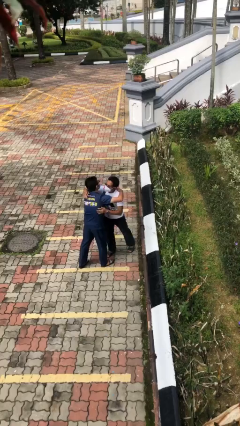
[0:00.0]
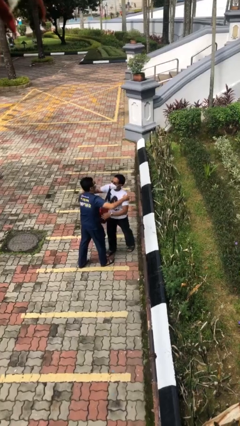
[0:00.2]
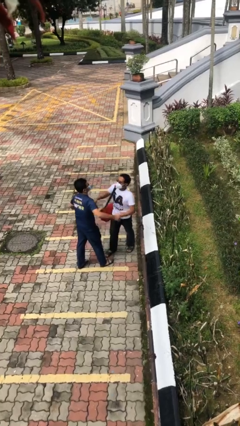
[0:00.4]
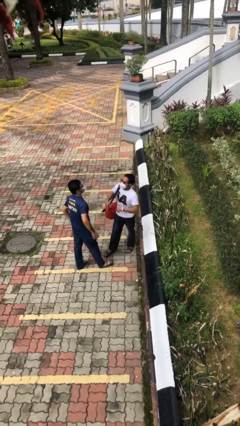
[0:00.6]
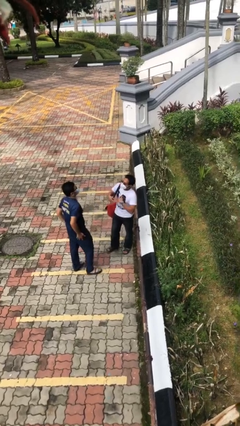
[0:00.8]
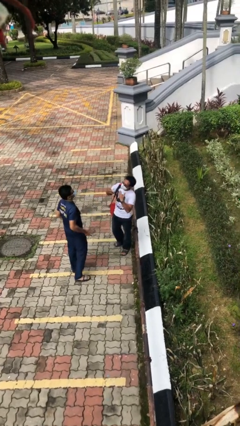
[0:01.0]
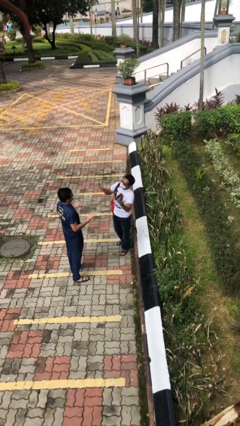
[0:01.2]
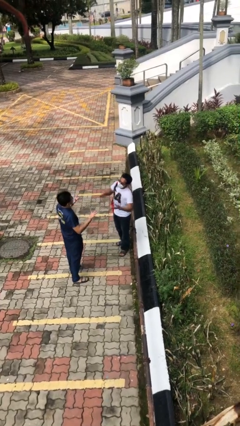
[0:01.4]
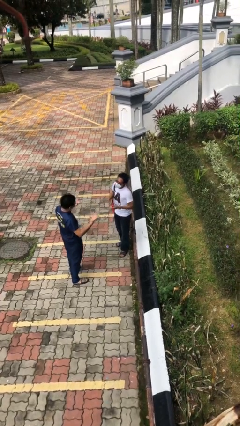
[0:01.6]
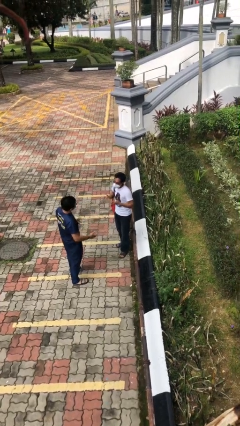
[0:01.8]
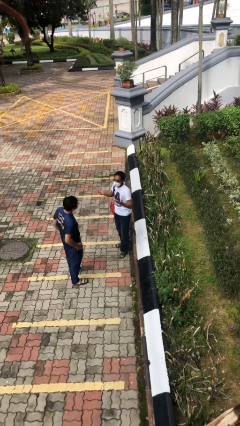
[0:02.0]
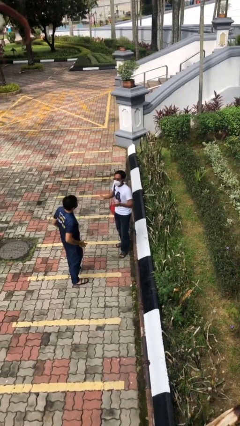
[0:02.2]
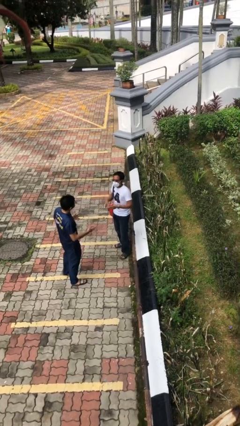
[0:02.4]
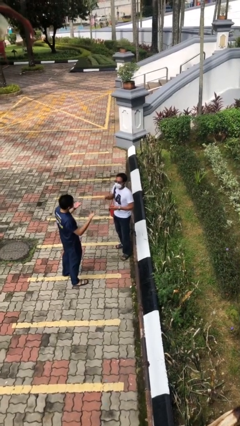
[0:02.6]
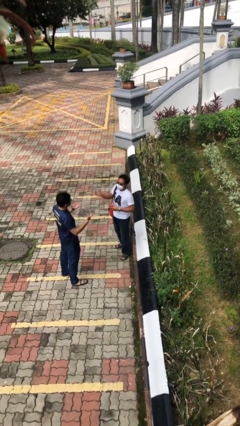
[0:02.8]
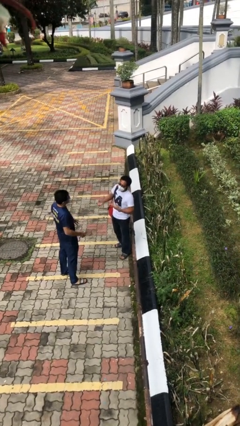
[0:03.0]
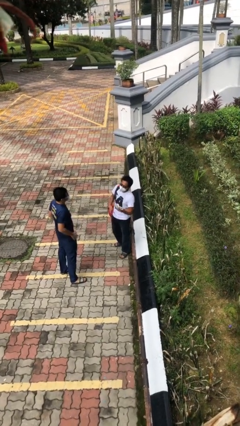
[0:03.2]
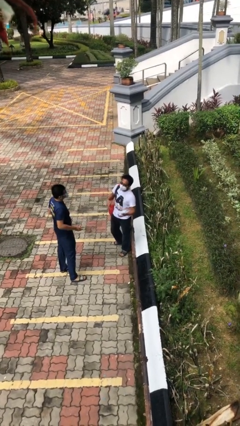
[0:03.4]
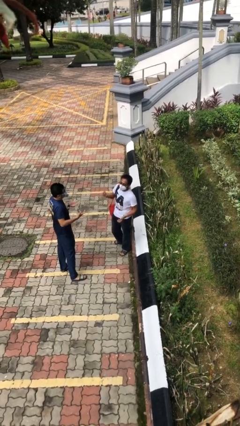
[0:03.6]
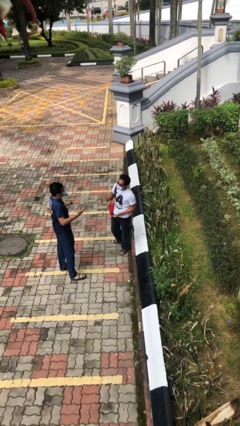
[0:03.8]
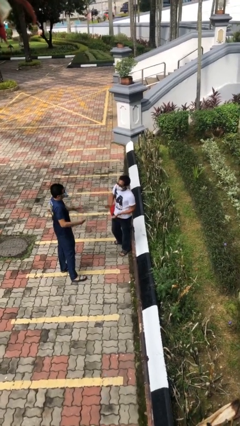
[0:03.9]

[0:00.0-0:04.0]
person talks to person

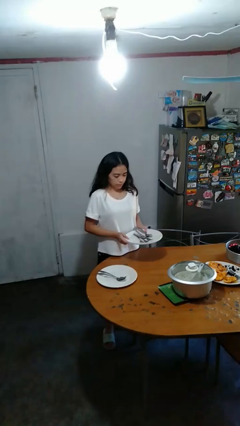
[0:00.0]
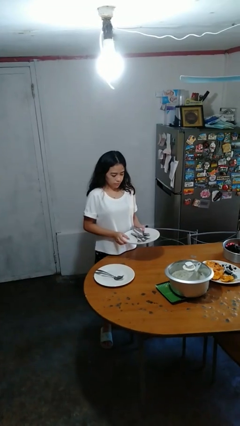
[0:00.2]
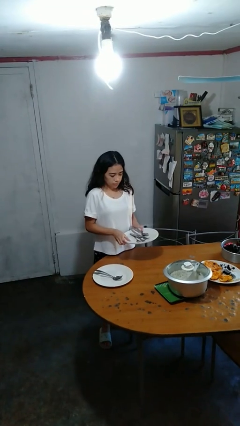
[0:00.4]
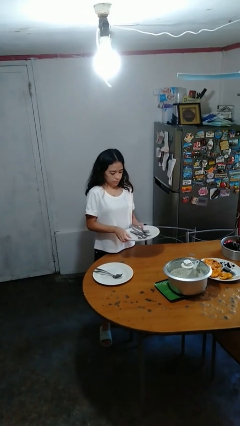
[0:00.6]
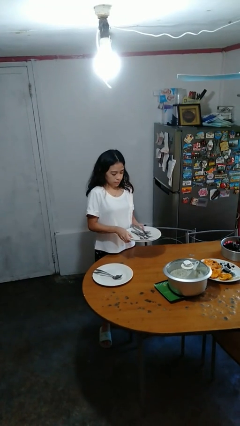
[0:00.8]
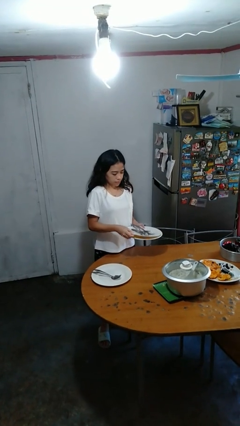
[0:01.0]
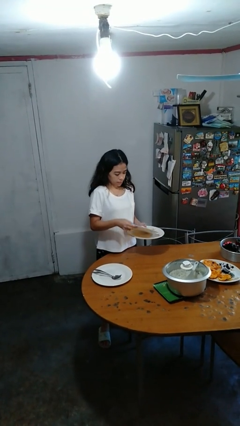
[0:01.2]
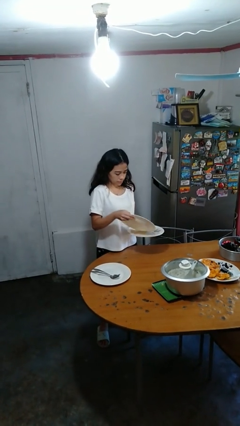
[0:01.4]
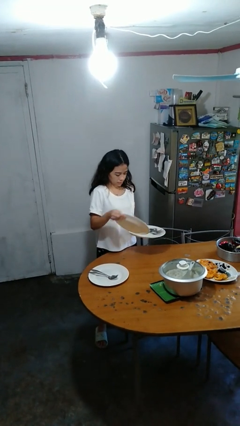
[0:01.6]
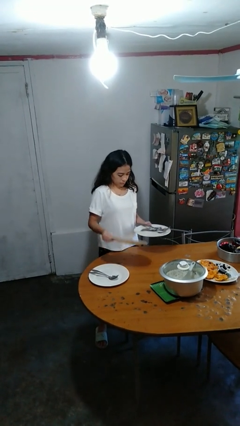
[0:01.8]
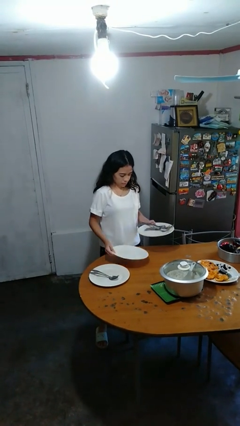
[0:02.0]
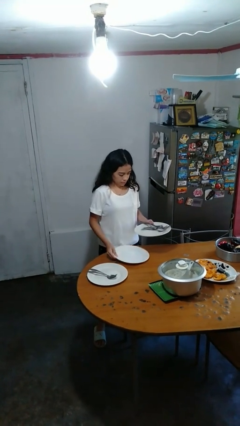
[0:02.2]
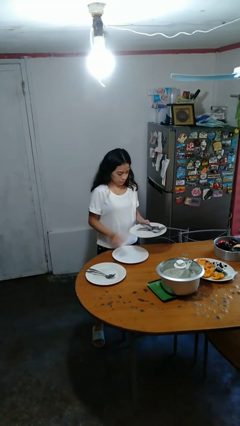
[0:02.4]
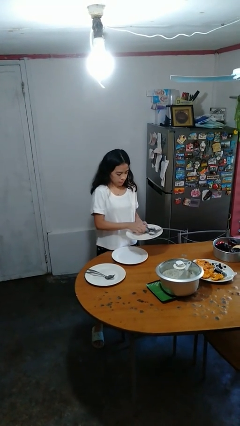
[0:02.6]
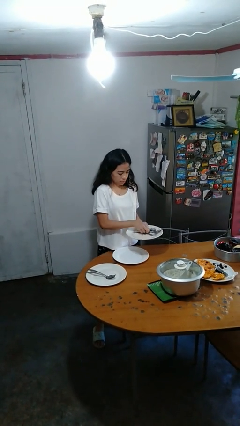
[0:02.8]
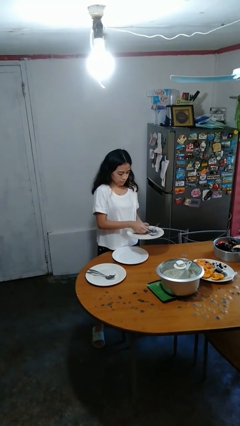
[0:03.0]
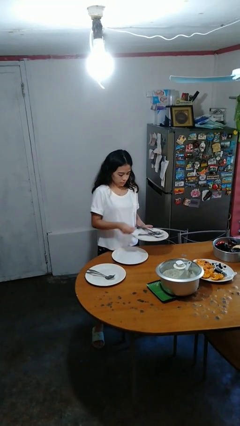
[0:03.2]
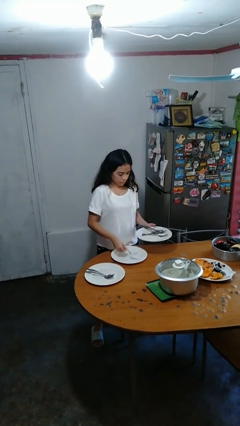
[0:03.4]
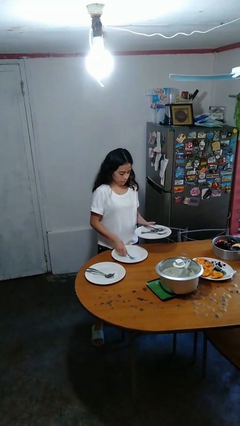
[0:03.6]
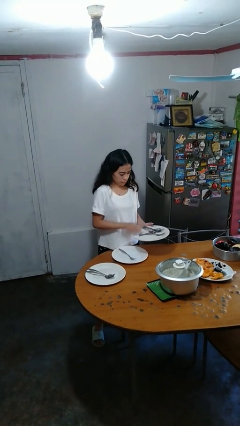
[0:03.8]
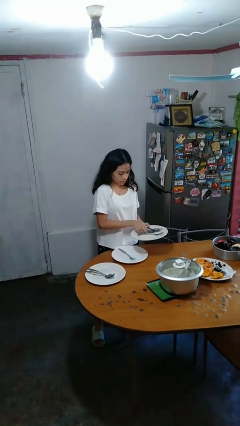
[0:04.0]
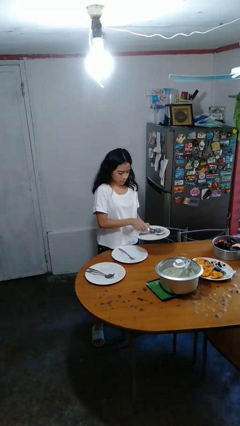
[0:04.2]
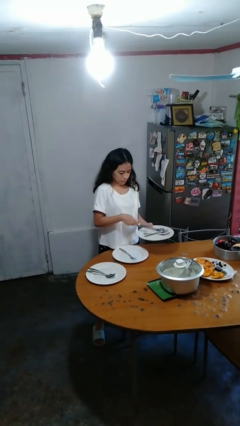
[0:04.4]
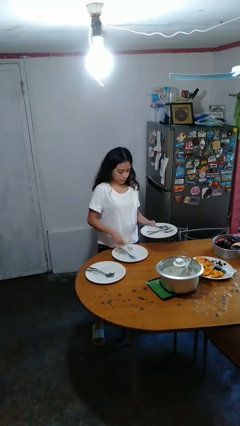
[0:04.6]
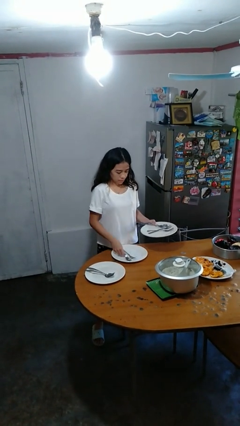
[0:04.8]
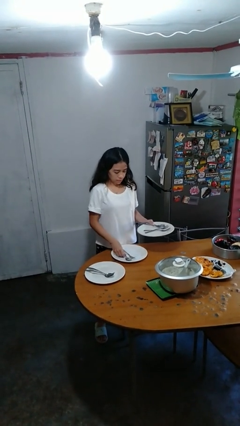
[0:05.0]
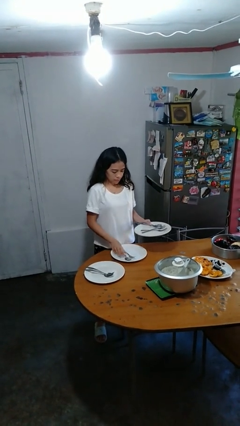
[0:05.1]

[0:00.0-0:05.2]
person sets table

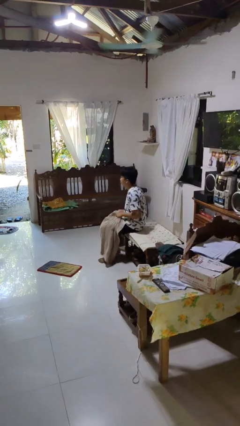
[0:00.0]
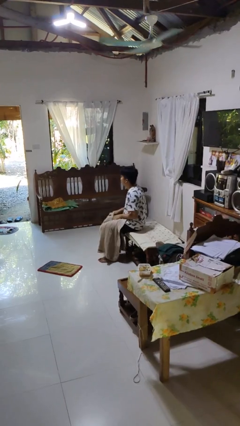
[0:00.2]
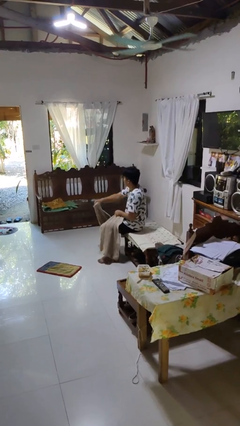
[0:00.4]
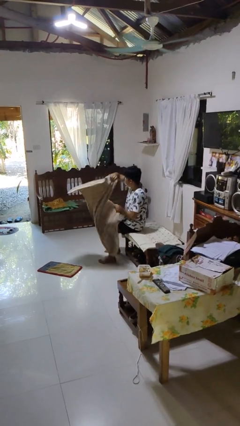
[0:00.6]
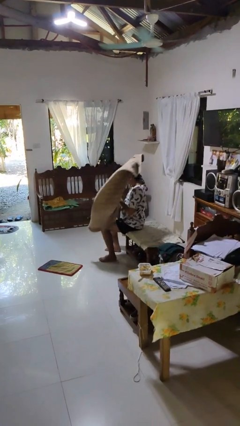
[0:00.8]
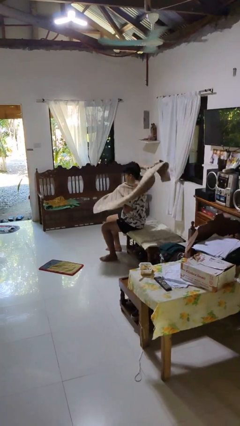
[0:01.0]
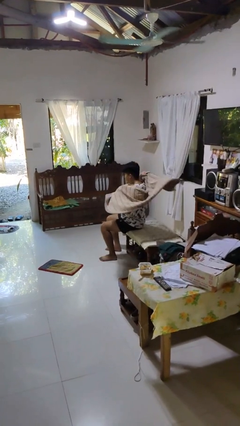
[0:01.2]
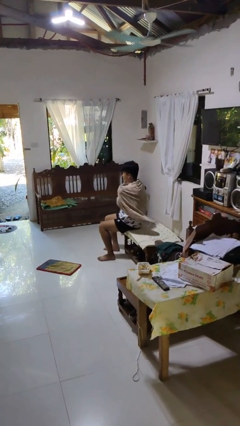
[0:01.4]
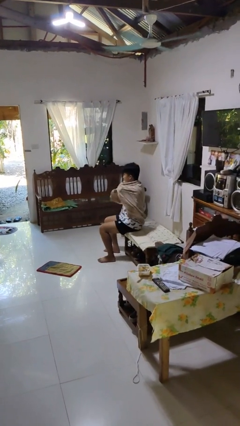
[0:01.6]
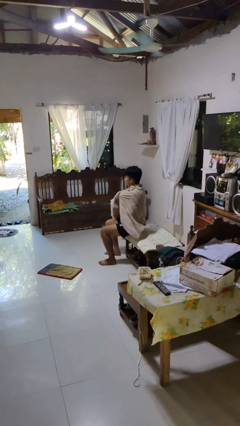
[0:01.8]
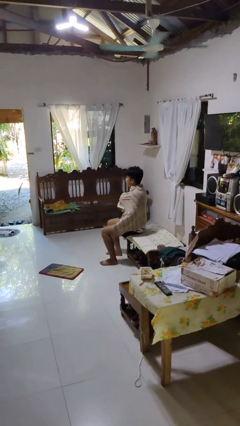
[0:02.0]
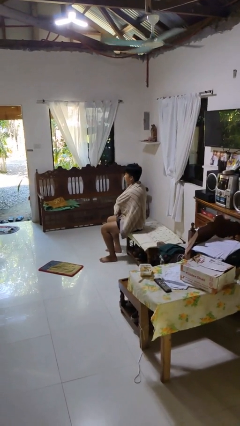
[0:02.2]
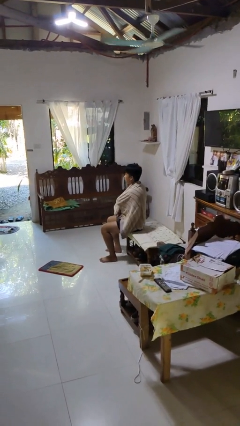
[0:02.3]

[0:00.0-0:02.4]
person covers with blanket

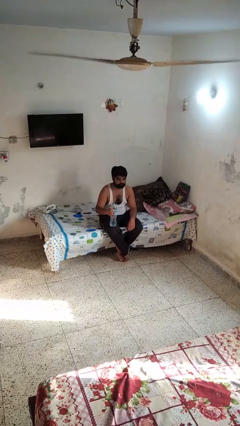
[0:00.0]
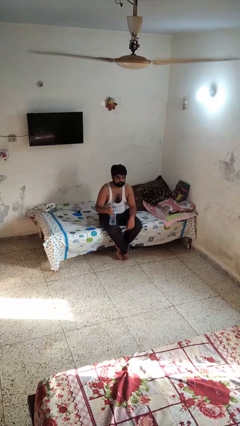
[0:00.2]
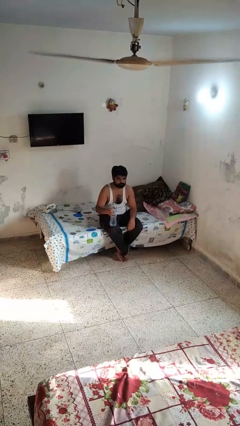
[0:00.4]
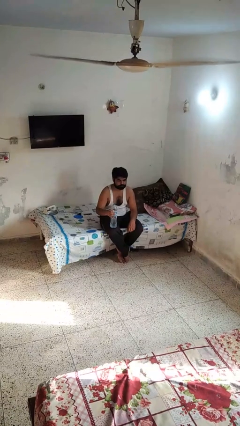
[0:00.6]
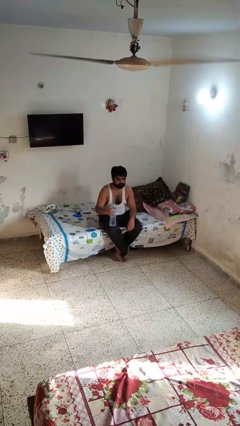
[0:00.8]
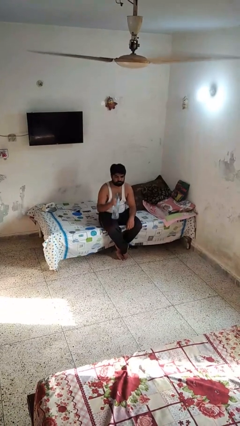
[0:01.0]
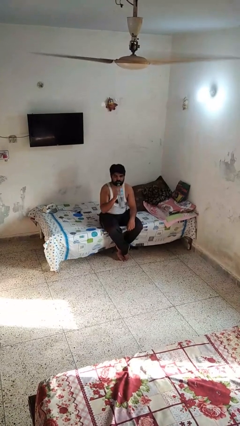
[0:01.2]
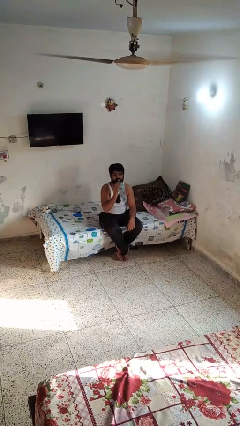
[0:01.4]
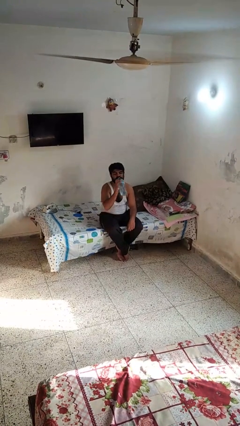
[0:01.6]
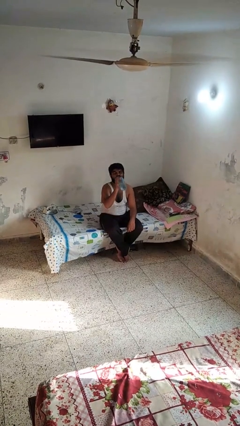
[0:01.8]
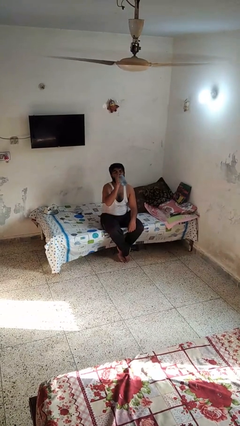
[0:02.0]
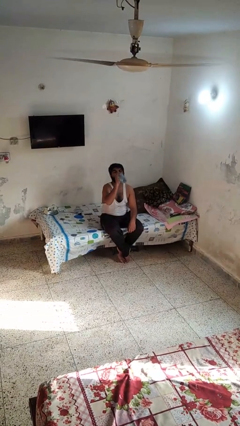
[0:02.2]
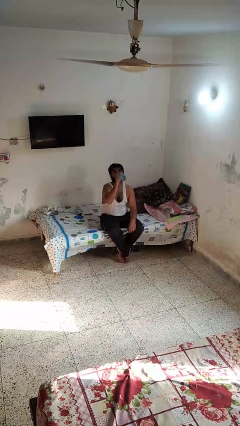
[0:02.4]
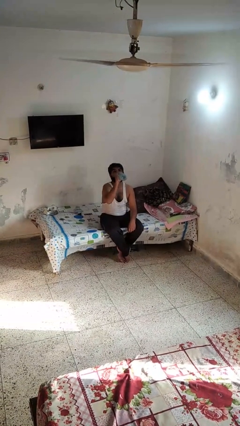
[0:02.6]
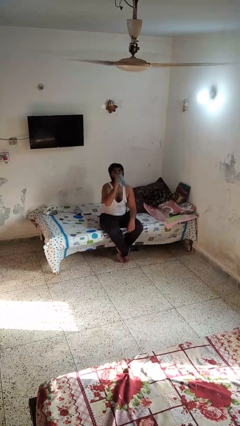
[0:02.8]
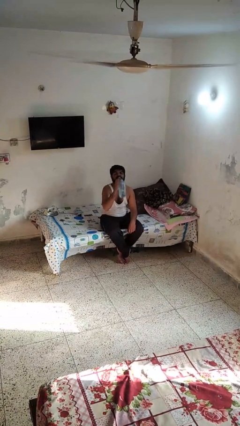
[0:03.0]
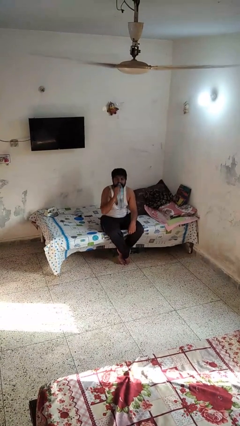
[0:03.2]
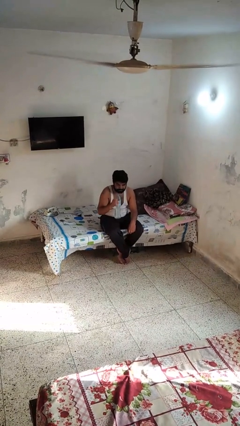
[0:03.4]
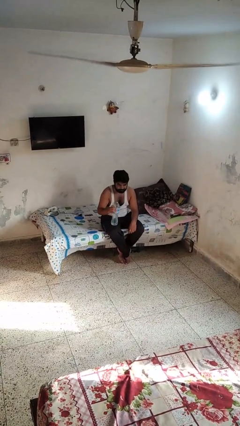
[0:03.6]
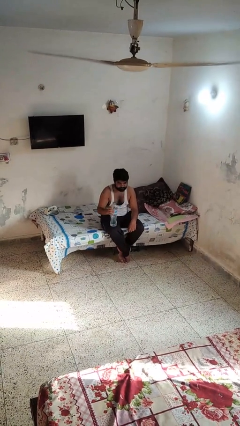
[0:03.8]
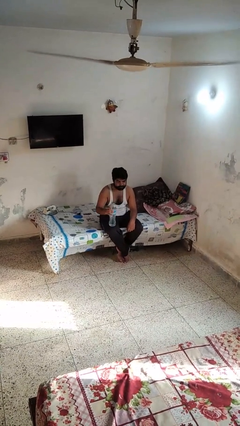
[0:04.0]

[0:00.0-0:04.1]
person drinks from bottle

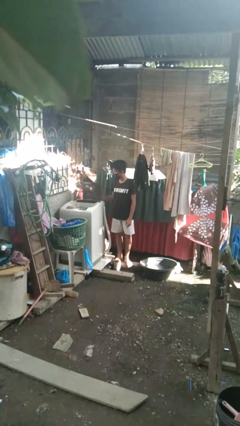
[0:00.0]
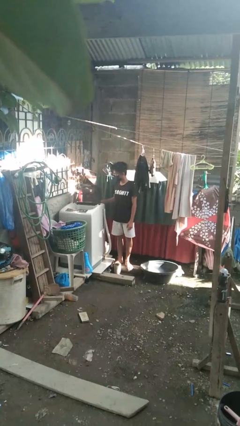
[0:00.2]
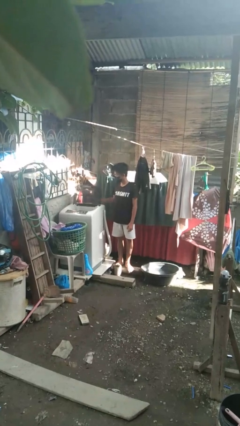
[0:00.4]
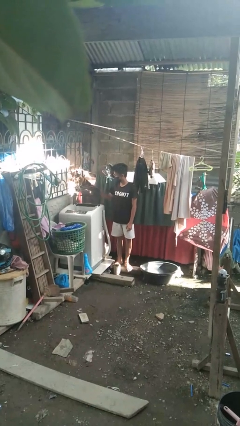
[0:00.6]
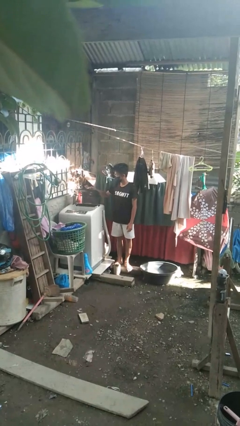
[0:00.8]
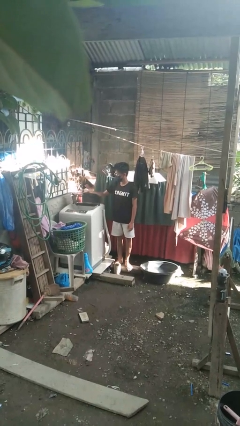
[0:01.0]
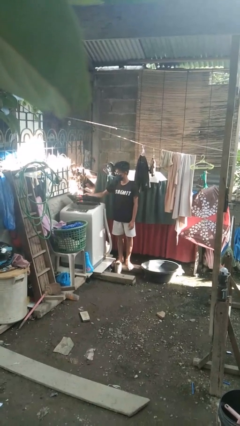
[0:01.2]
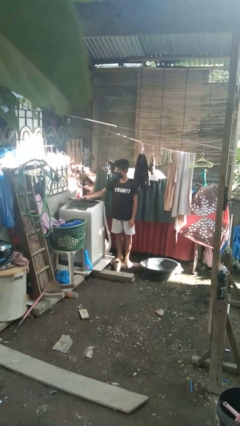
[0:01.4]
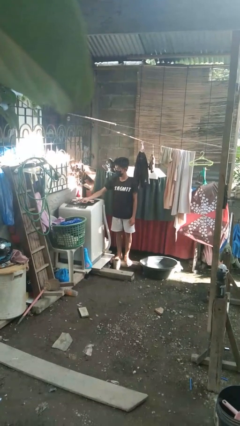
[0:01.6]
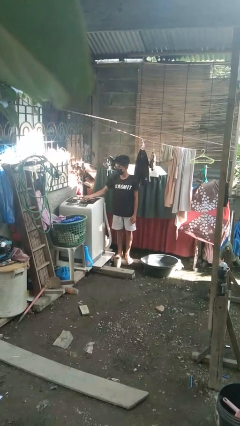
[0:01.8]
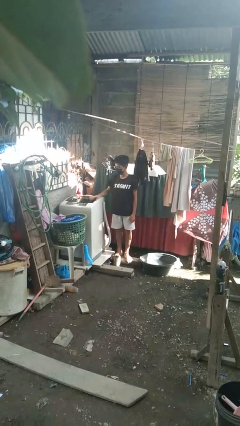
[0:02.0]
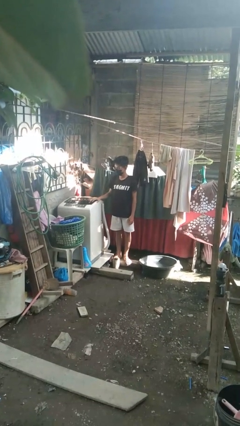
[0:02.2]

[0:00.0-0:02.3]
person closes clothes washer
